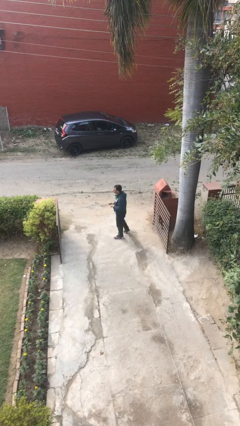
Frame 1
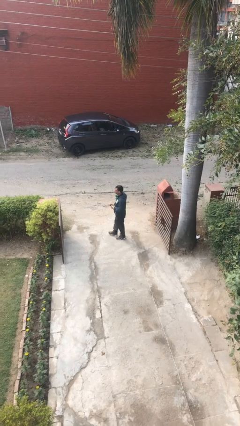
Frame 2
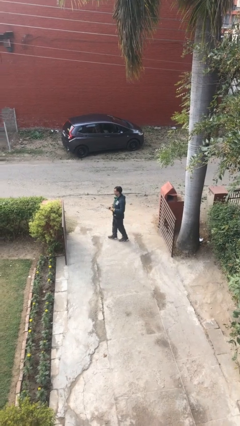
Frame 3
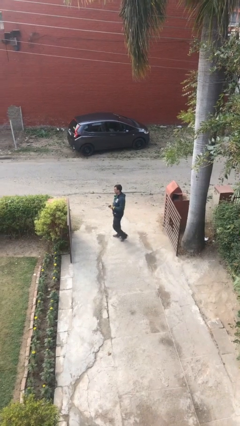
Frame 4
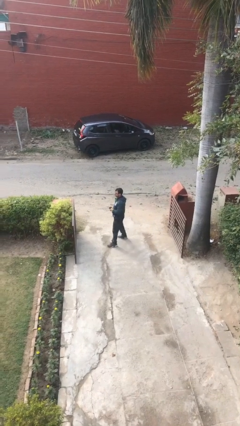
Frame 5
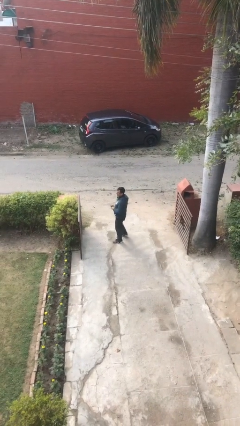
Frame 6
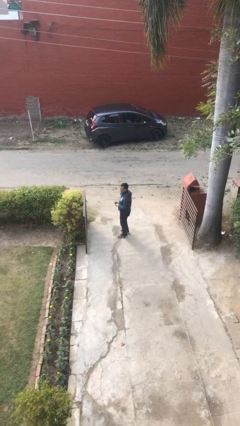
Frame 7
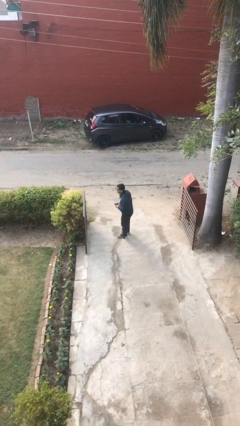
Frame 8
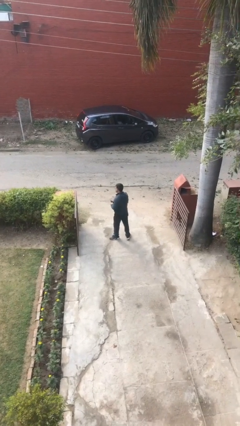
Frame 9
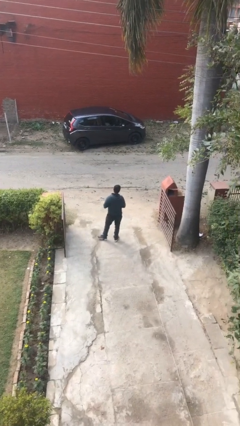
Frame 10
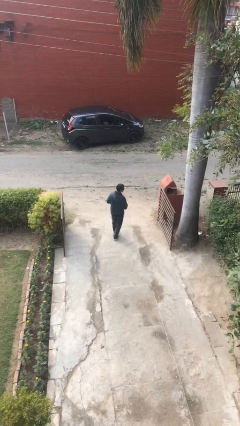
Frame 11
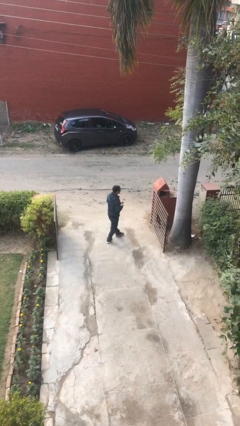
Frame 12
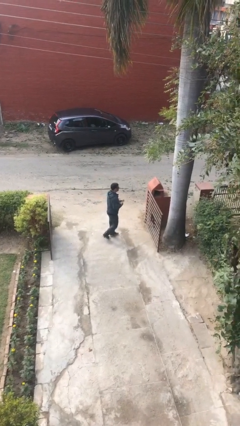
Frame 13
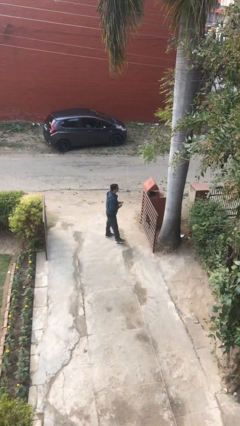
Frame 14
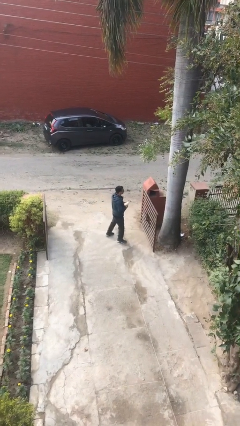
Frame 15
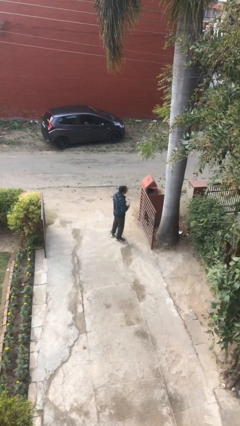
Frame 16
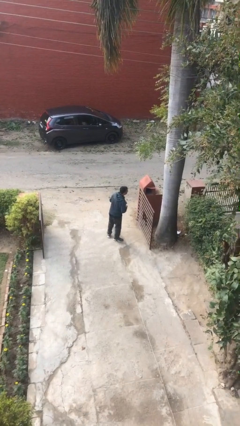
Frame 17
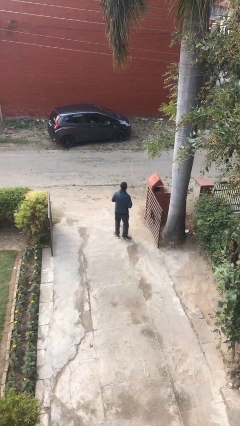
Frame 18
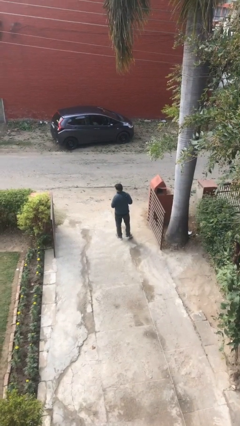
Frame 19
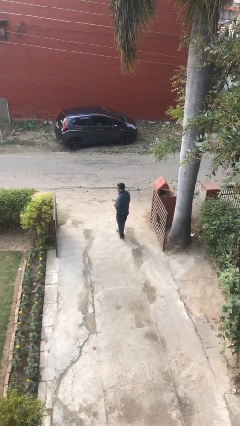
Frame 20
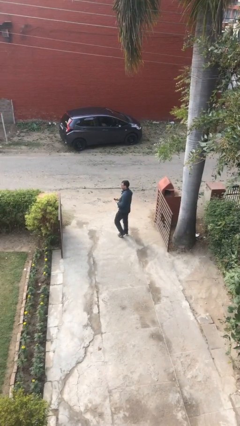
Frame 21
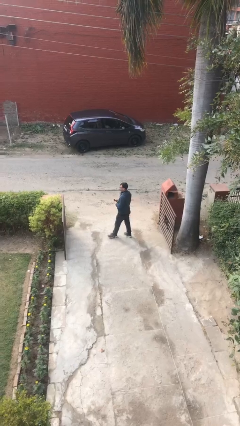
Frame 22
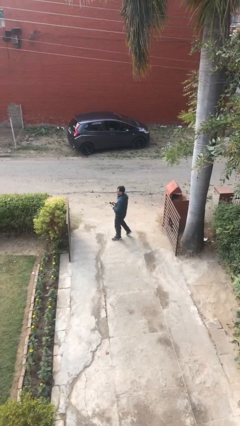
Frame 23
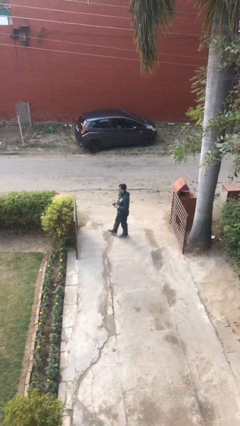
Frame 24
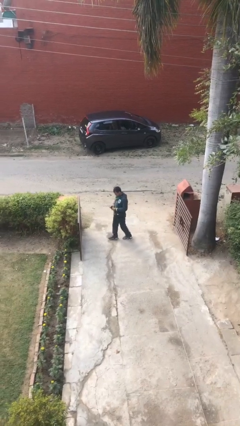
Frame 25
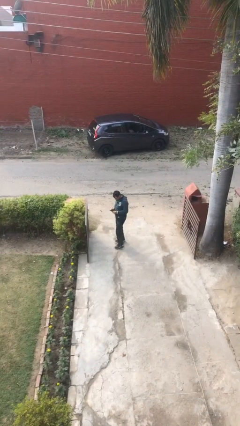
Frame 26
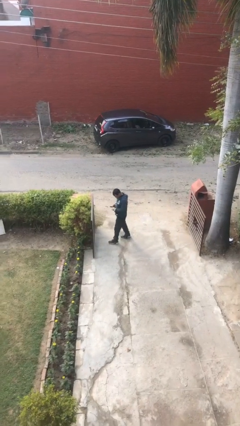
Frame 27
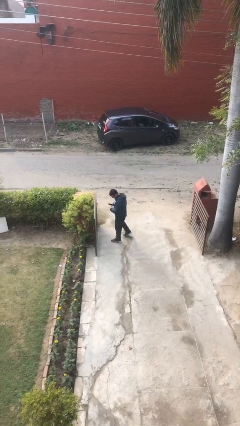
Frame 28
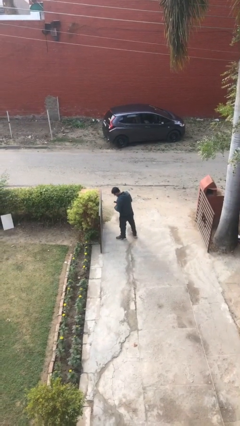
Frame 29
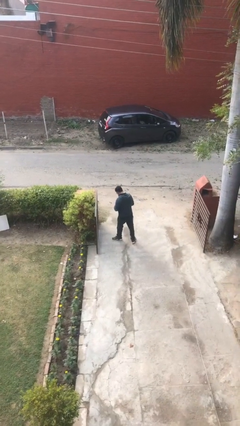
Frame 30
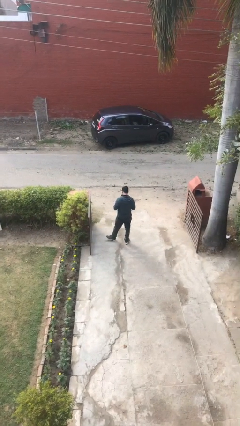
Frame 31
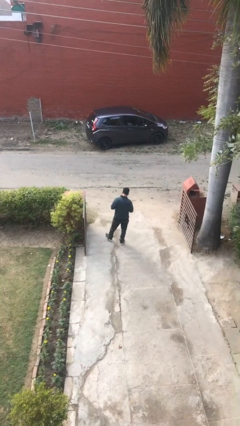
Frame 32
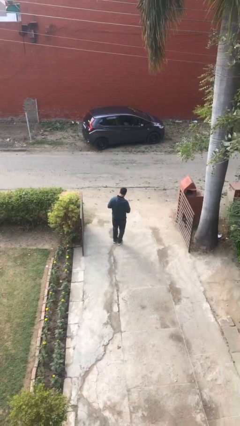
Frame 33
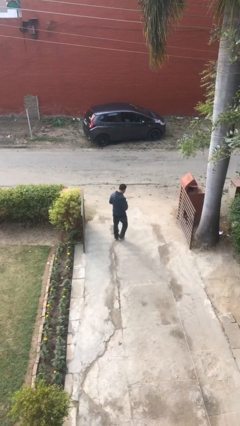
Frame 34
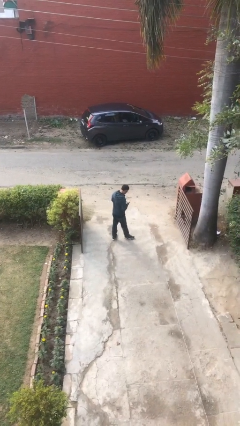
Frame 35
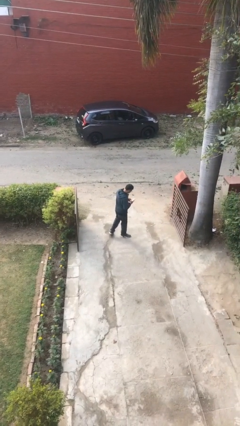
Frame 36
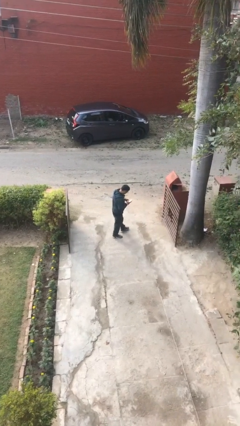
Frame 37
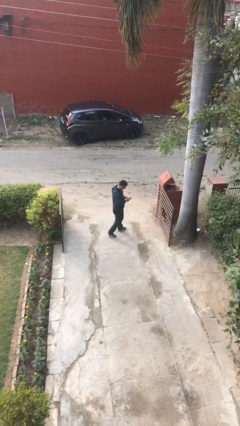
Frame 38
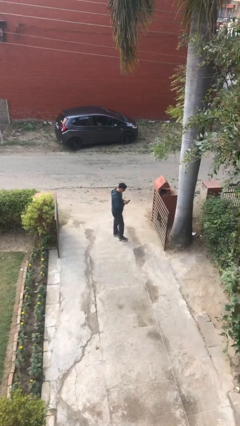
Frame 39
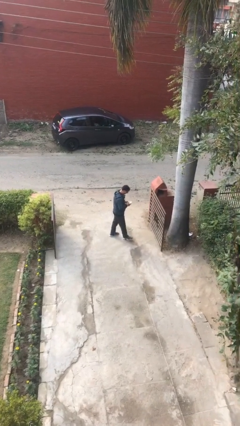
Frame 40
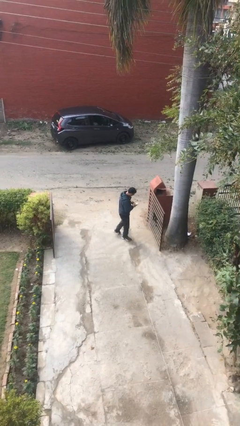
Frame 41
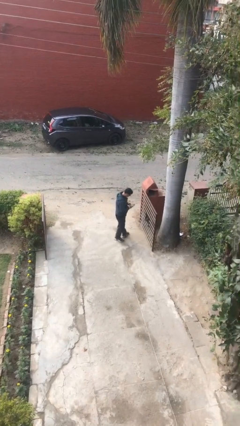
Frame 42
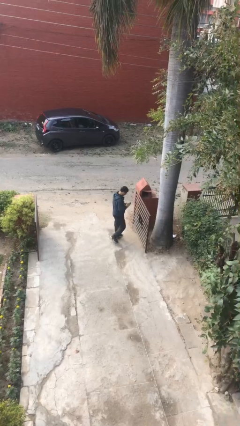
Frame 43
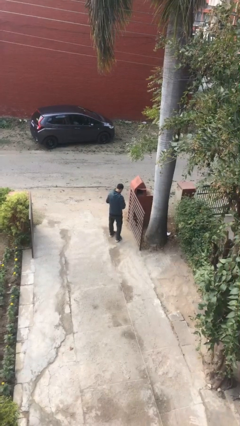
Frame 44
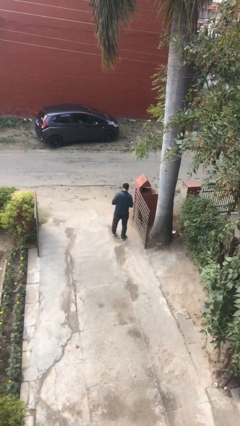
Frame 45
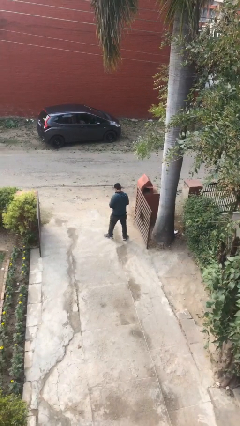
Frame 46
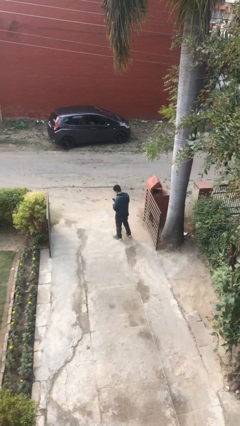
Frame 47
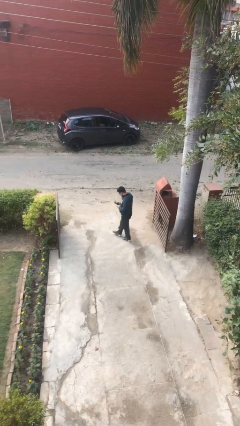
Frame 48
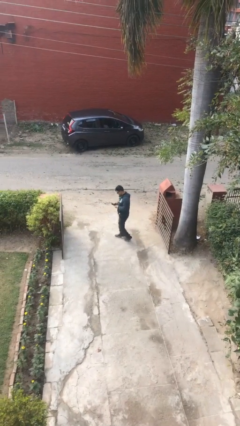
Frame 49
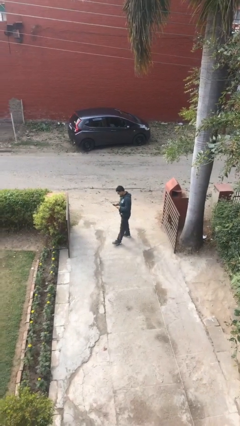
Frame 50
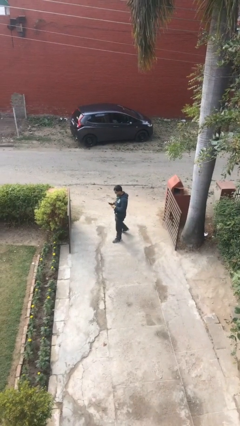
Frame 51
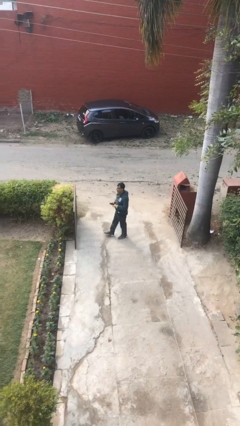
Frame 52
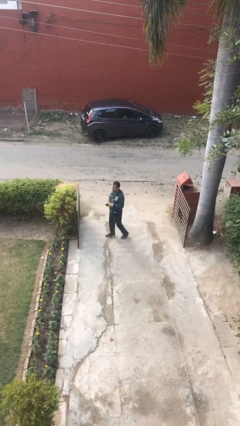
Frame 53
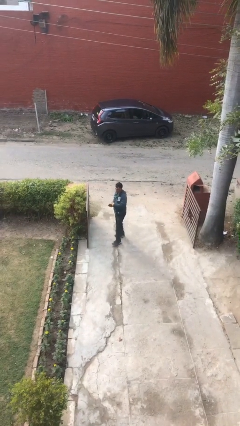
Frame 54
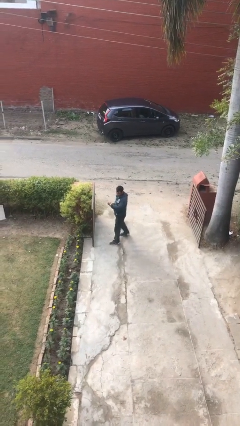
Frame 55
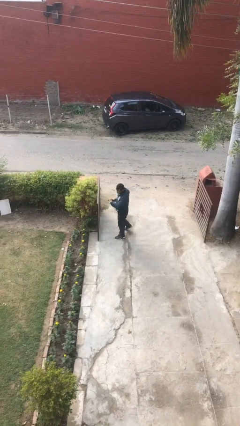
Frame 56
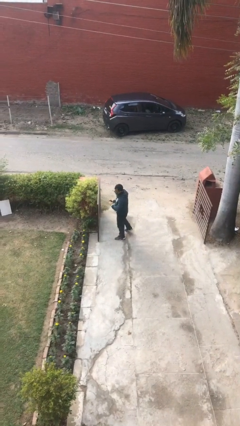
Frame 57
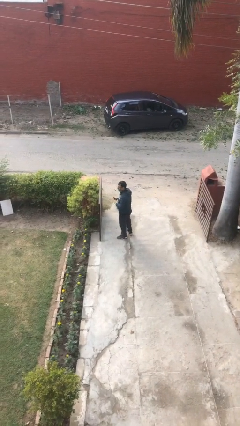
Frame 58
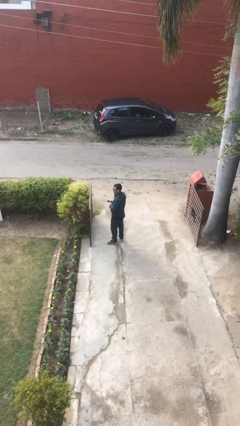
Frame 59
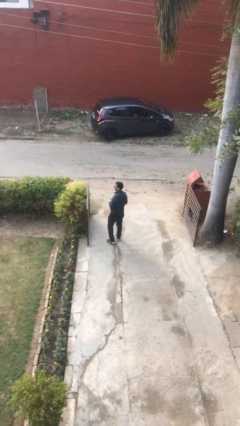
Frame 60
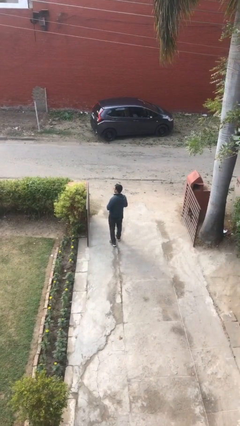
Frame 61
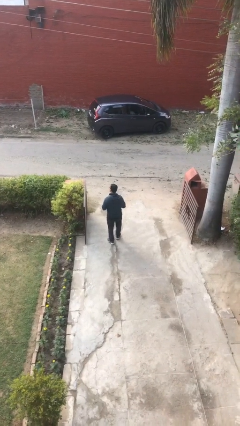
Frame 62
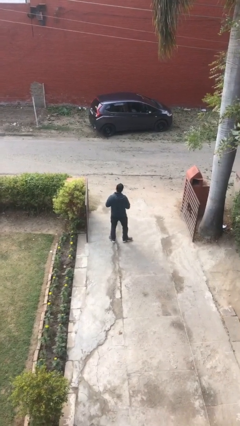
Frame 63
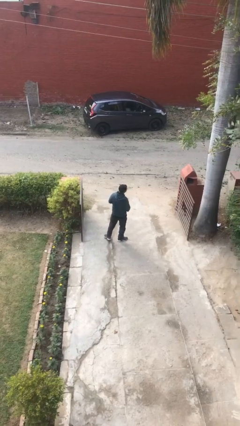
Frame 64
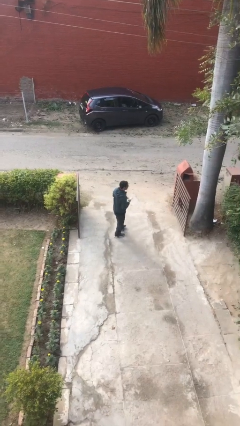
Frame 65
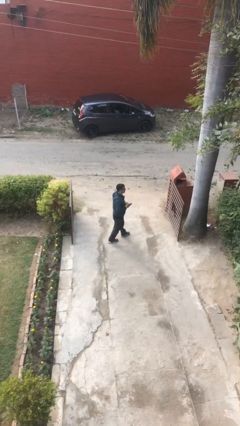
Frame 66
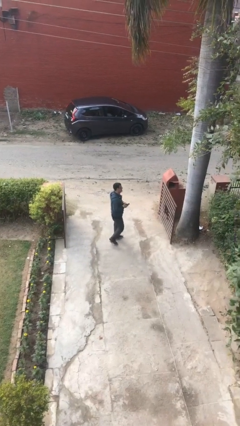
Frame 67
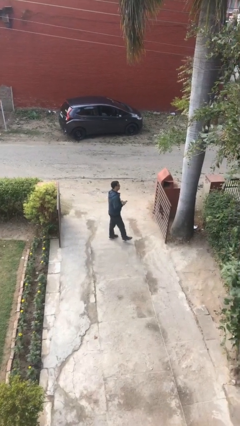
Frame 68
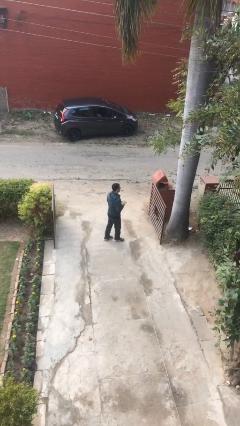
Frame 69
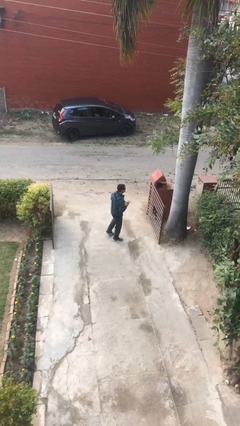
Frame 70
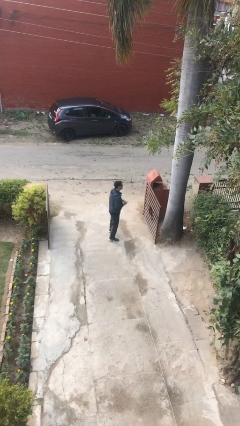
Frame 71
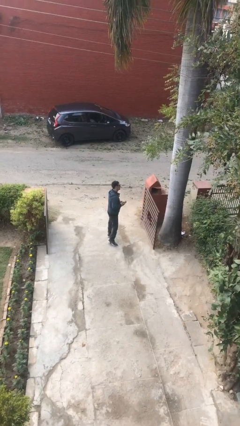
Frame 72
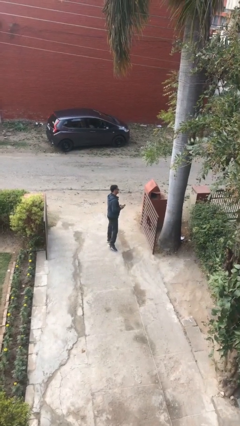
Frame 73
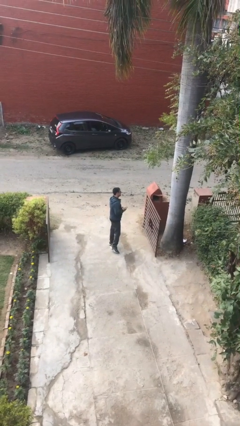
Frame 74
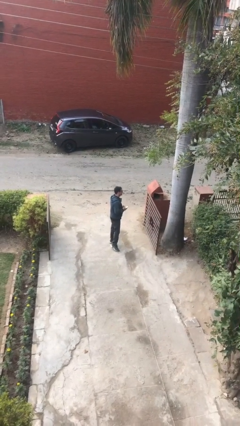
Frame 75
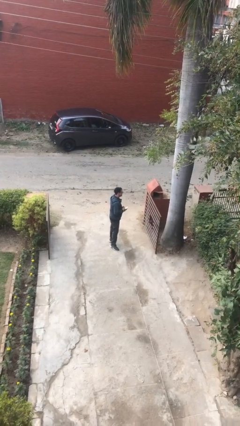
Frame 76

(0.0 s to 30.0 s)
person walks

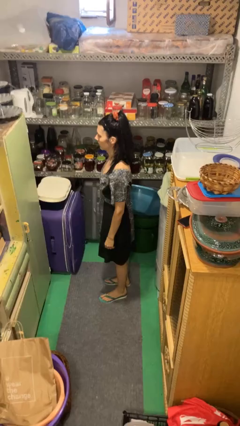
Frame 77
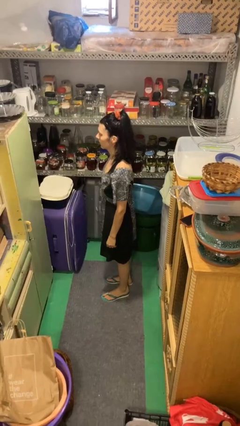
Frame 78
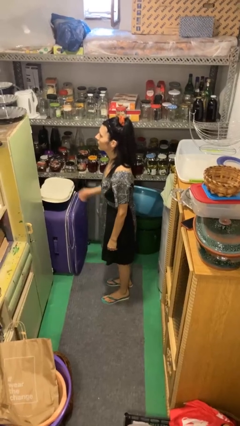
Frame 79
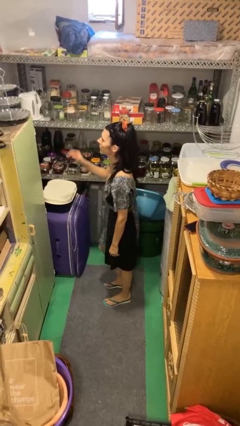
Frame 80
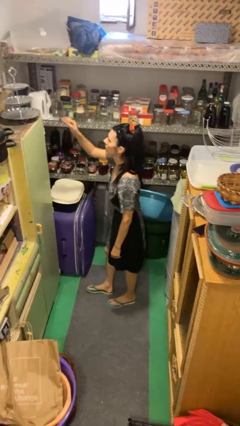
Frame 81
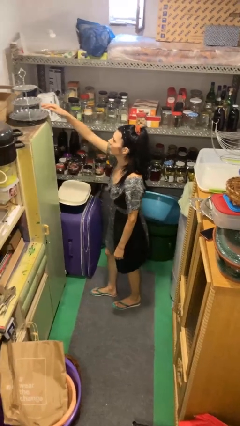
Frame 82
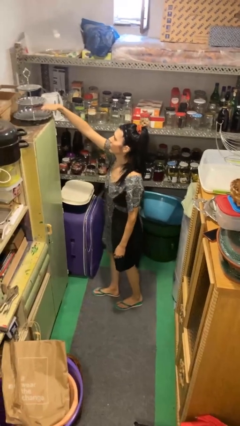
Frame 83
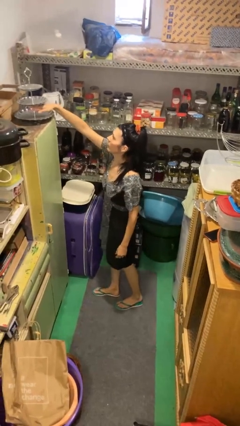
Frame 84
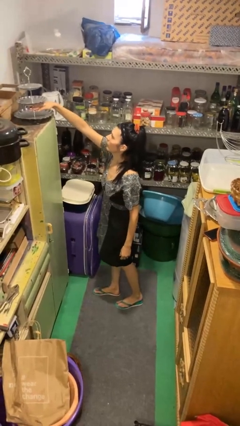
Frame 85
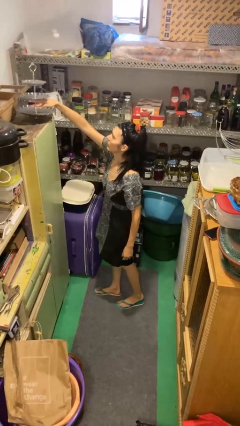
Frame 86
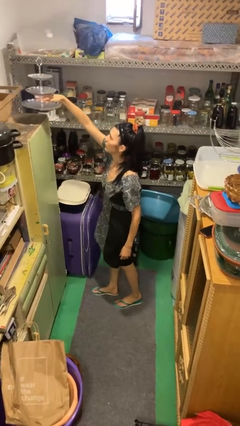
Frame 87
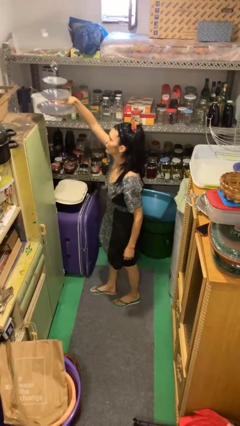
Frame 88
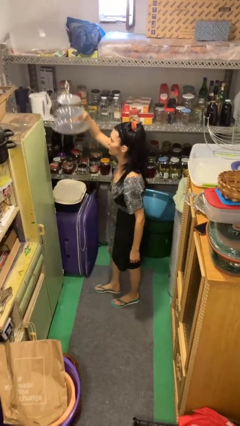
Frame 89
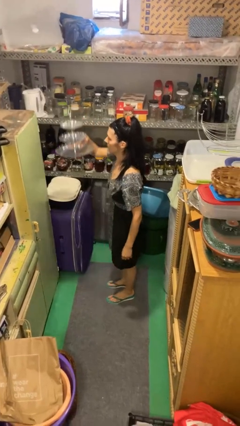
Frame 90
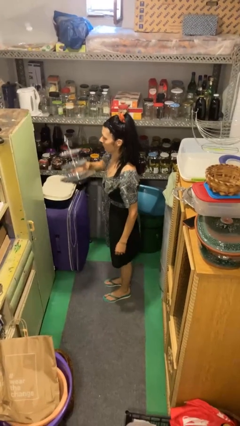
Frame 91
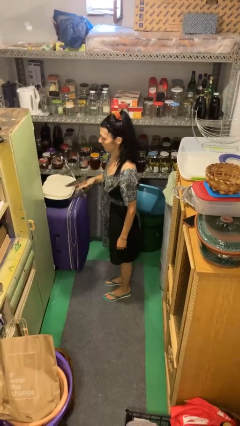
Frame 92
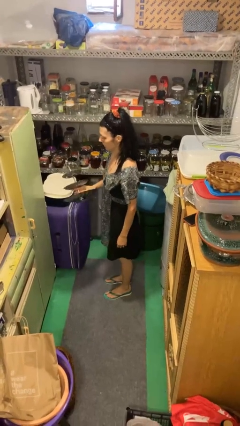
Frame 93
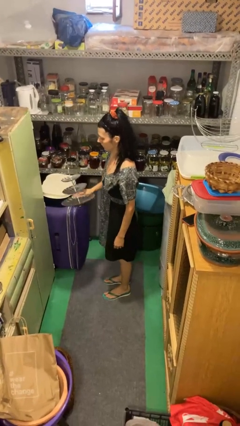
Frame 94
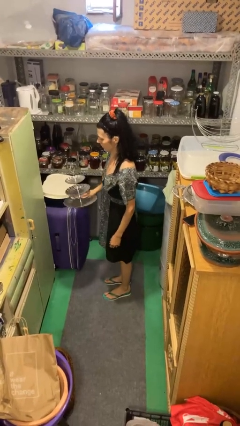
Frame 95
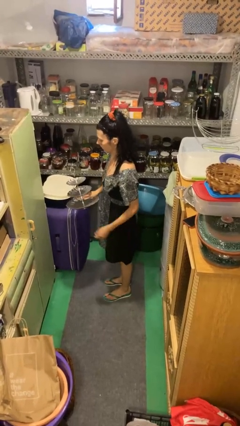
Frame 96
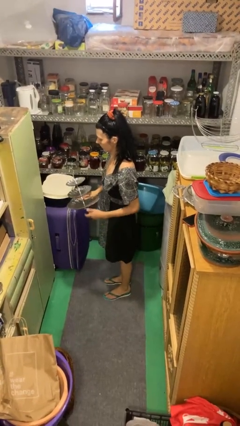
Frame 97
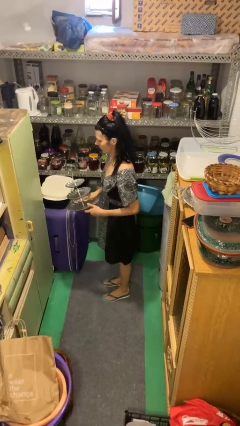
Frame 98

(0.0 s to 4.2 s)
person picks up object from countertop
